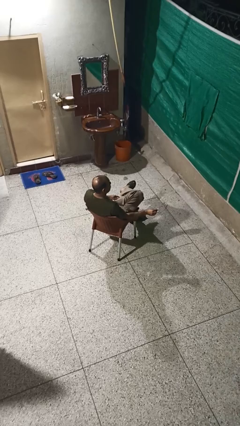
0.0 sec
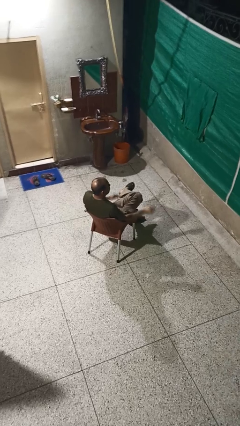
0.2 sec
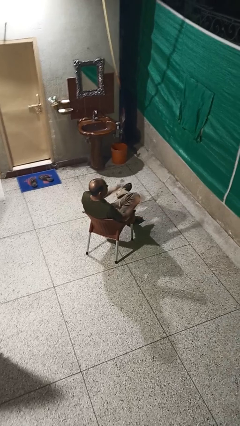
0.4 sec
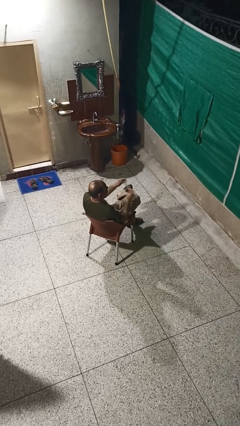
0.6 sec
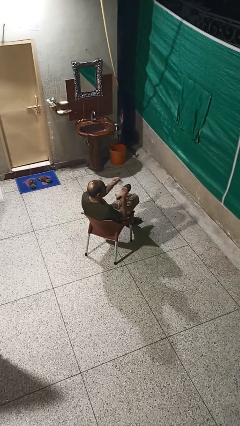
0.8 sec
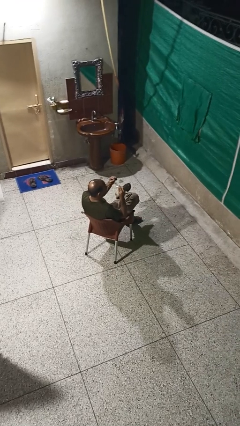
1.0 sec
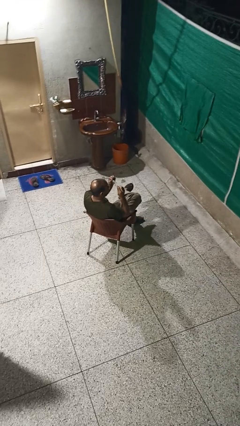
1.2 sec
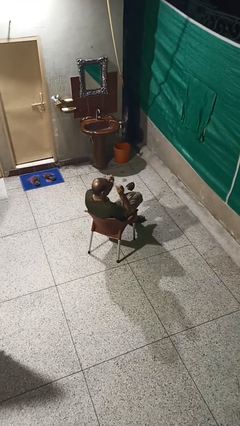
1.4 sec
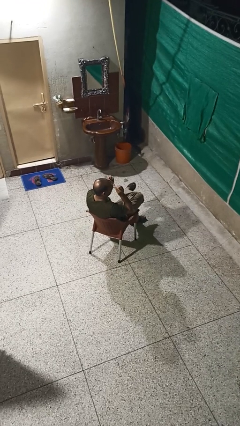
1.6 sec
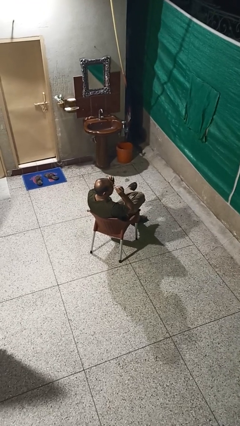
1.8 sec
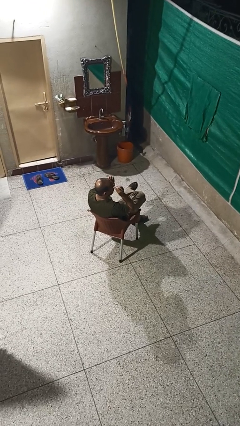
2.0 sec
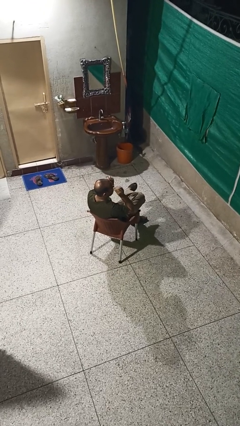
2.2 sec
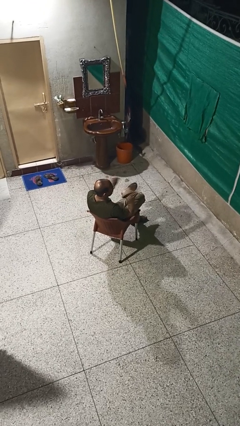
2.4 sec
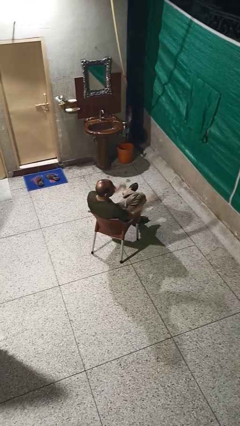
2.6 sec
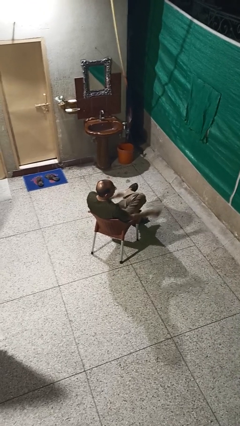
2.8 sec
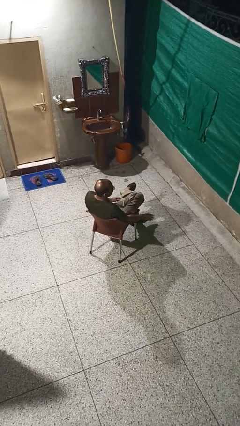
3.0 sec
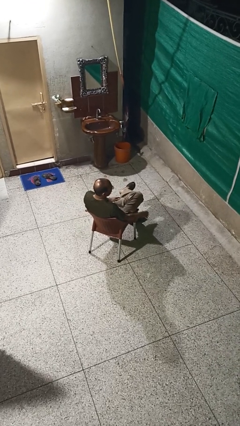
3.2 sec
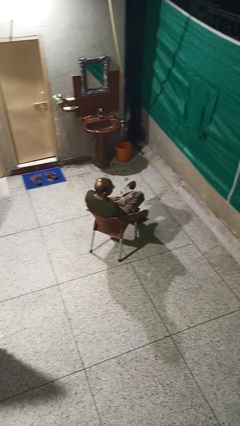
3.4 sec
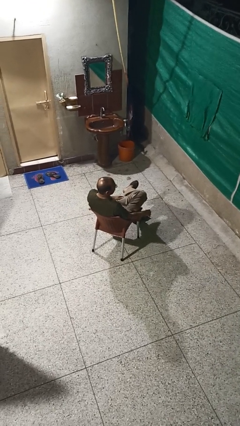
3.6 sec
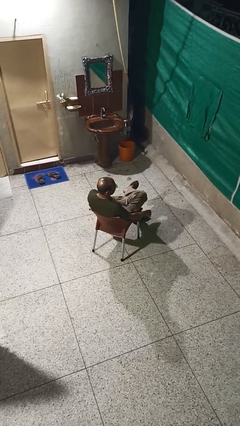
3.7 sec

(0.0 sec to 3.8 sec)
person puts on glasses

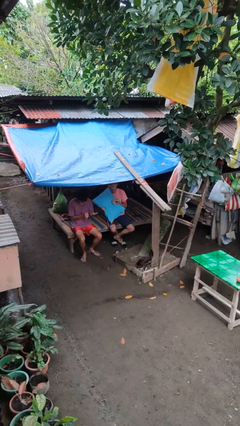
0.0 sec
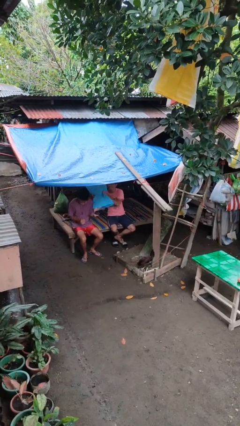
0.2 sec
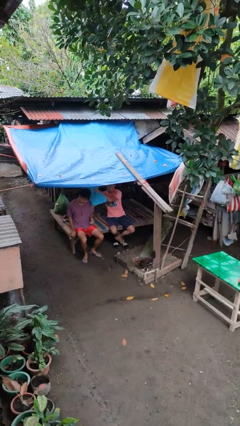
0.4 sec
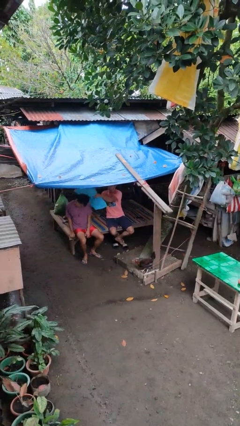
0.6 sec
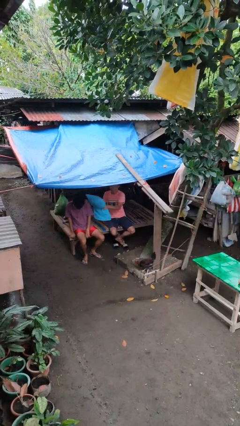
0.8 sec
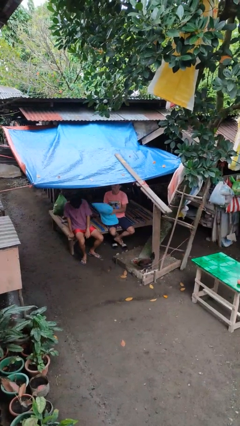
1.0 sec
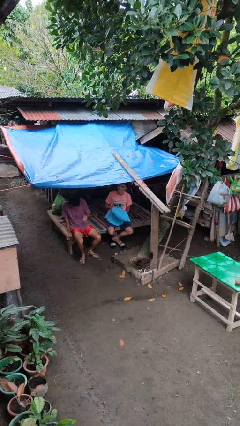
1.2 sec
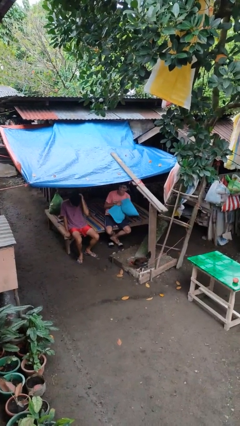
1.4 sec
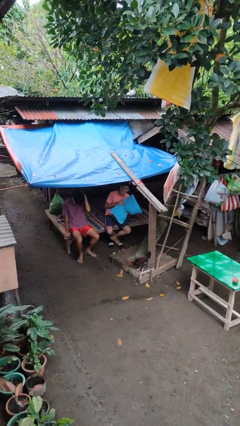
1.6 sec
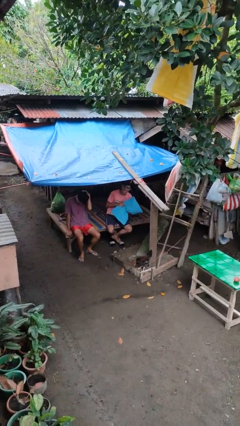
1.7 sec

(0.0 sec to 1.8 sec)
person hits person with pillow

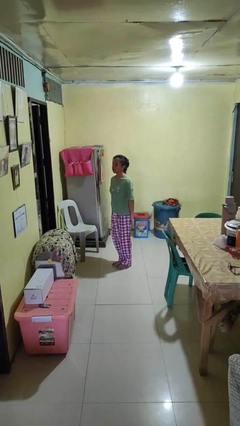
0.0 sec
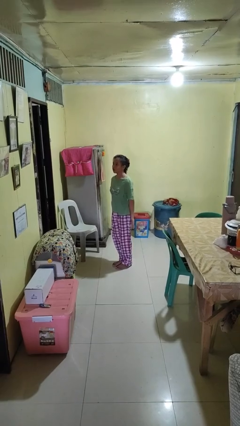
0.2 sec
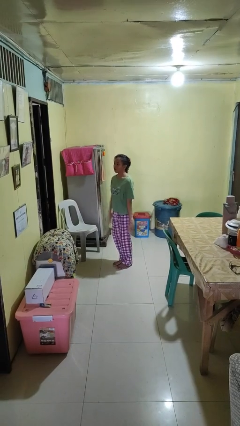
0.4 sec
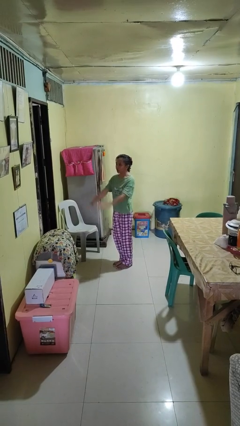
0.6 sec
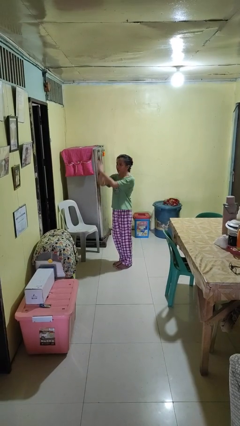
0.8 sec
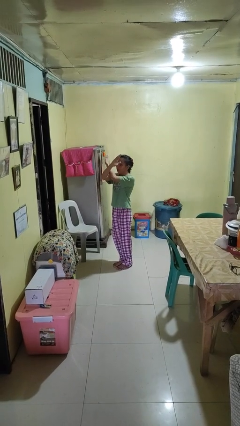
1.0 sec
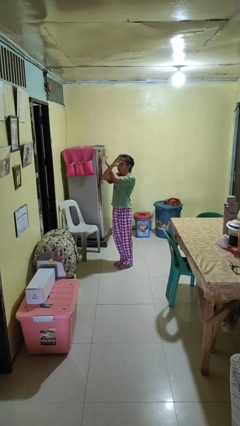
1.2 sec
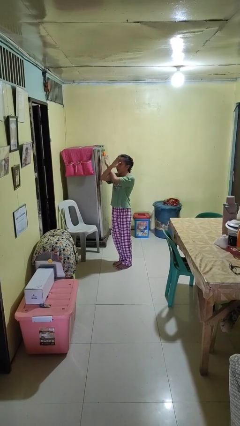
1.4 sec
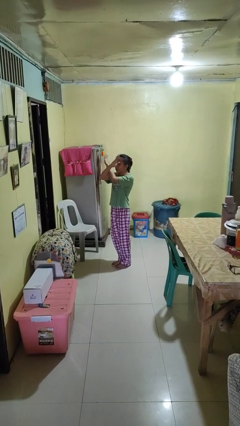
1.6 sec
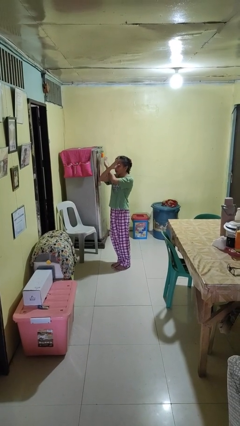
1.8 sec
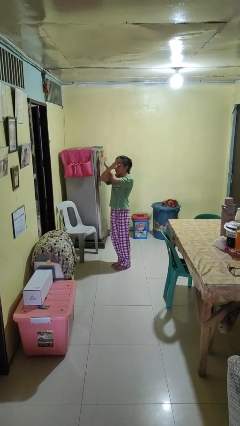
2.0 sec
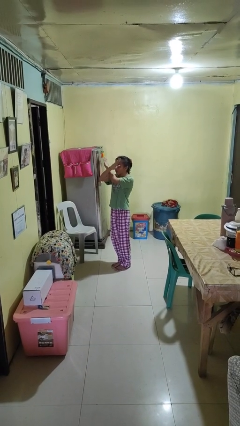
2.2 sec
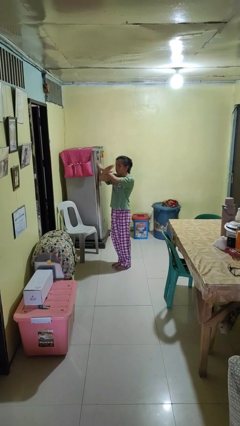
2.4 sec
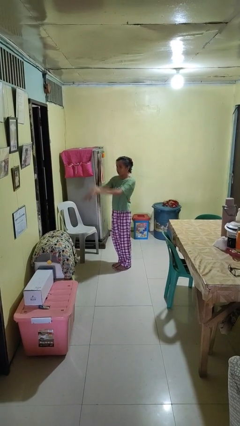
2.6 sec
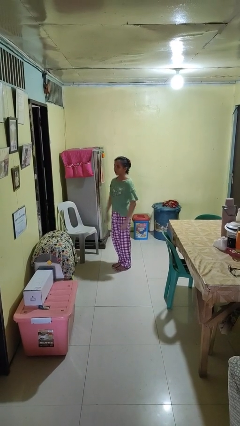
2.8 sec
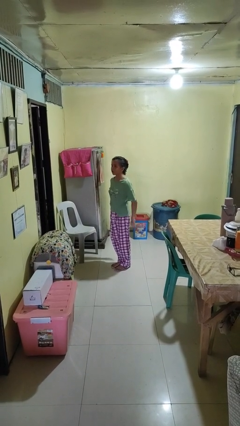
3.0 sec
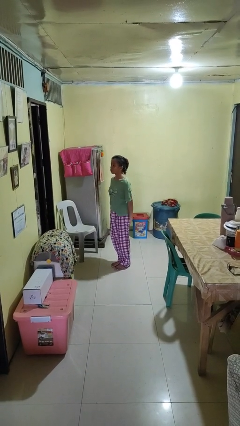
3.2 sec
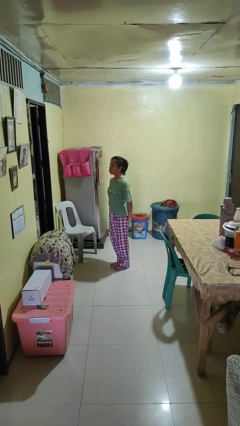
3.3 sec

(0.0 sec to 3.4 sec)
person gestures arms x

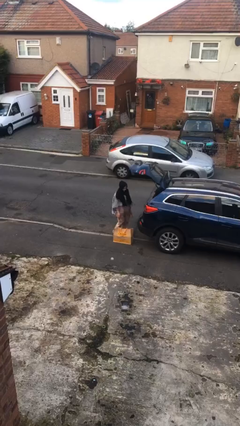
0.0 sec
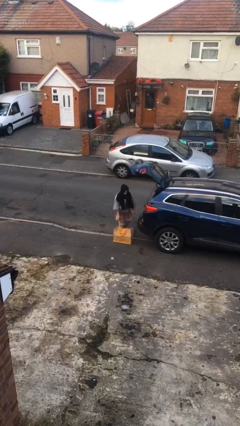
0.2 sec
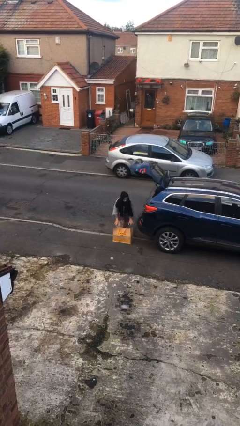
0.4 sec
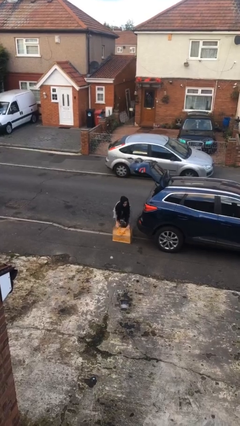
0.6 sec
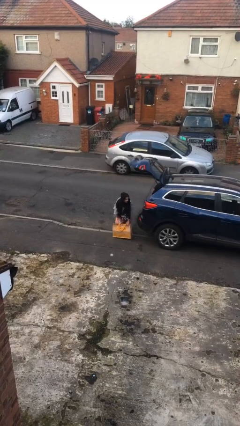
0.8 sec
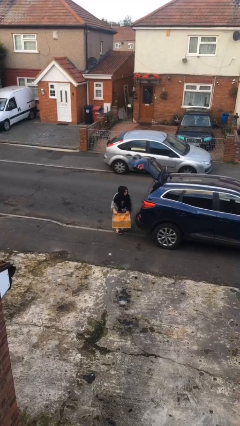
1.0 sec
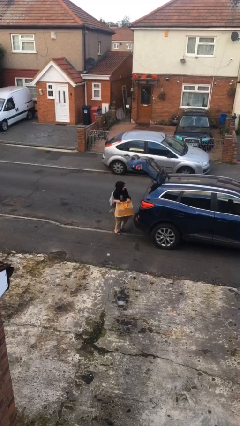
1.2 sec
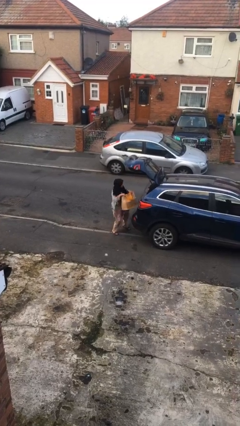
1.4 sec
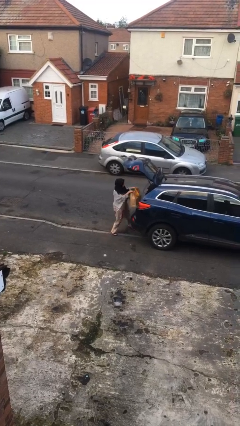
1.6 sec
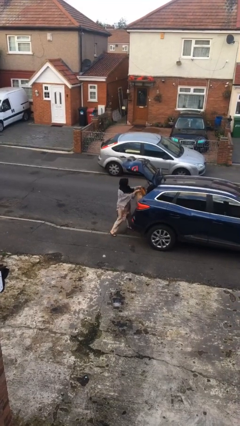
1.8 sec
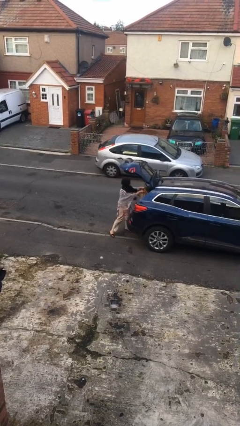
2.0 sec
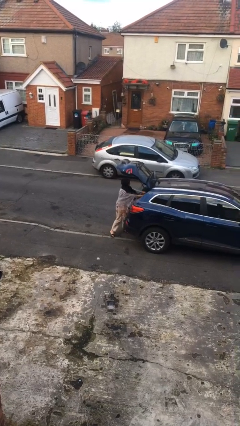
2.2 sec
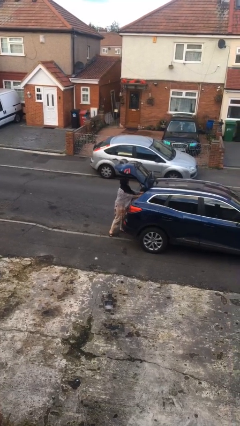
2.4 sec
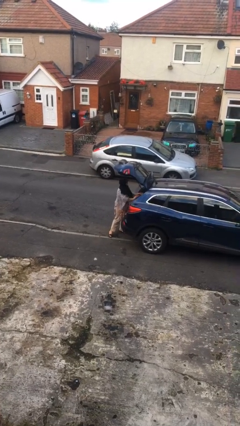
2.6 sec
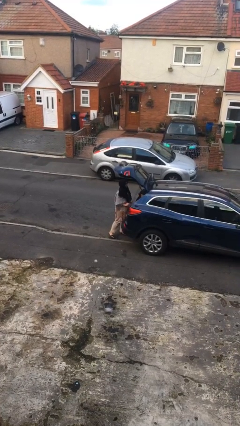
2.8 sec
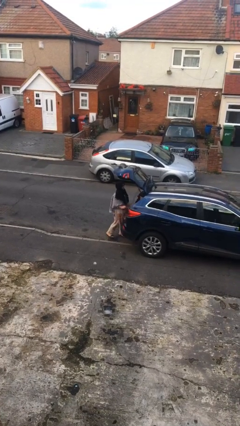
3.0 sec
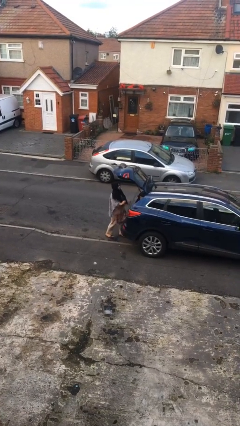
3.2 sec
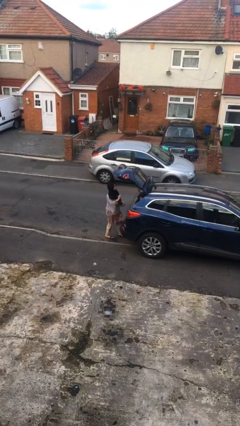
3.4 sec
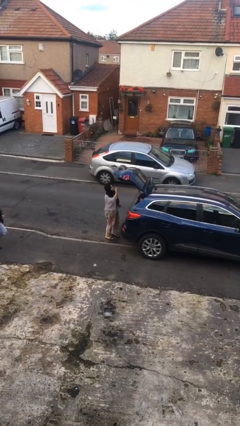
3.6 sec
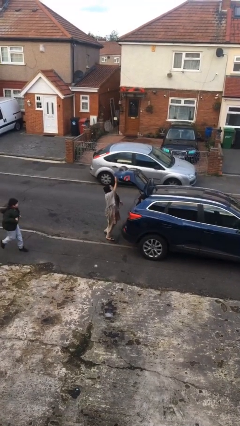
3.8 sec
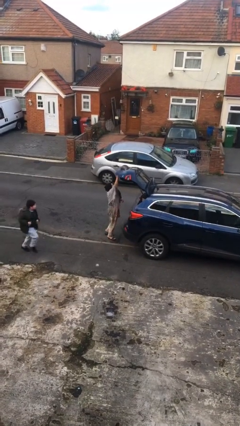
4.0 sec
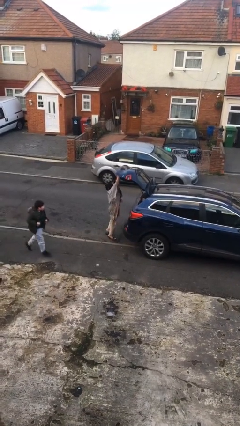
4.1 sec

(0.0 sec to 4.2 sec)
person loads car

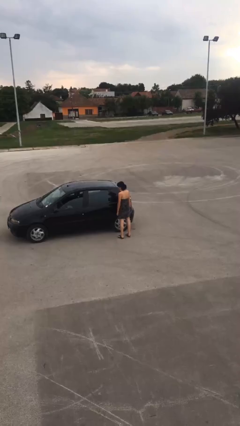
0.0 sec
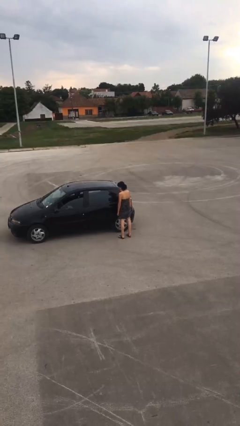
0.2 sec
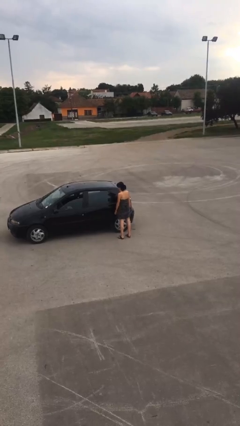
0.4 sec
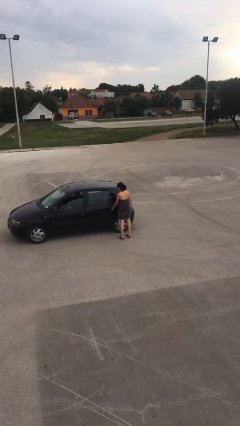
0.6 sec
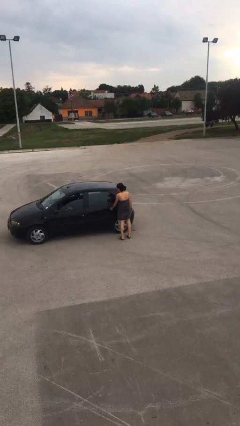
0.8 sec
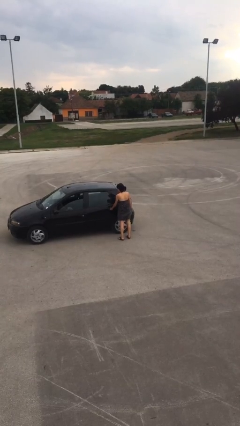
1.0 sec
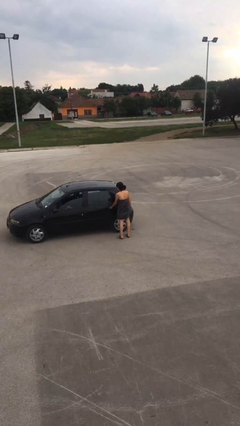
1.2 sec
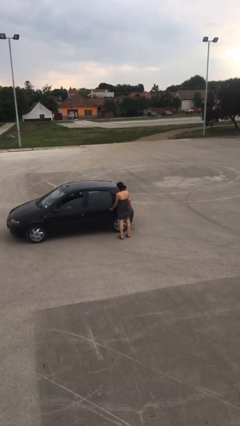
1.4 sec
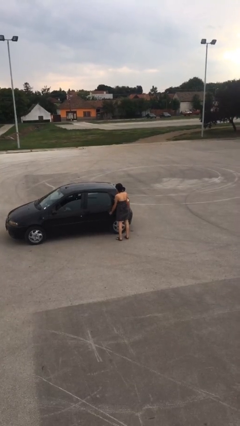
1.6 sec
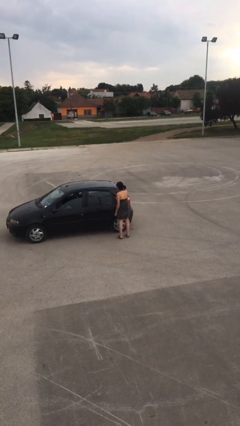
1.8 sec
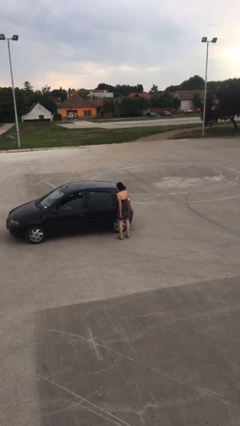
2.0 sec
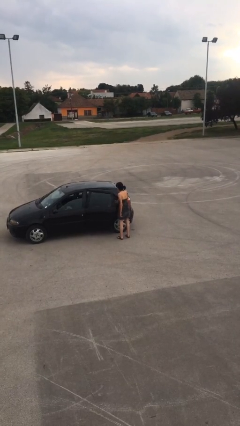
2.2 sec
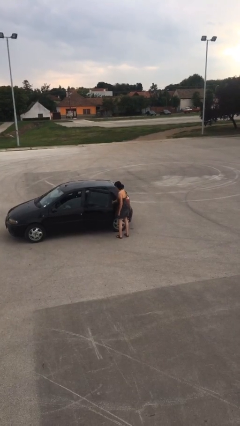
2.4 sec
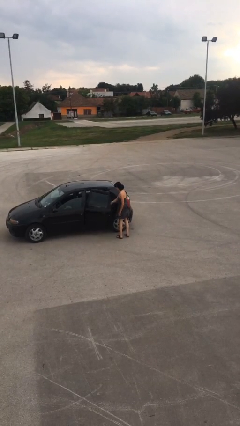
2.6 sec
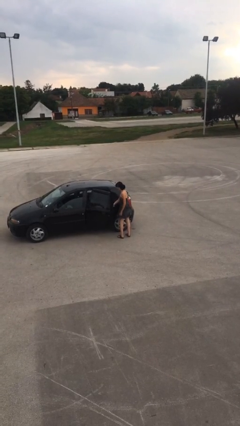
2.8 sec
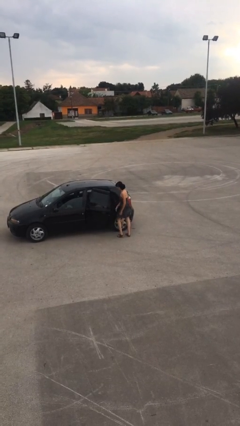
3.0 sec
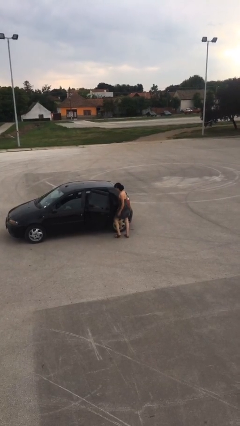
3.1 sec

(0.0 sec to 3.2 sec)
person opens car door

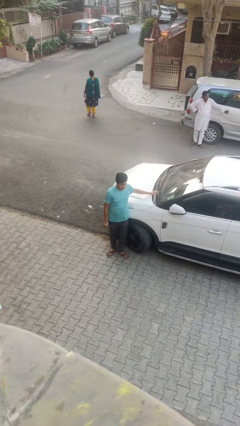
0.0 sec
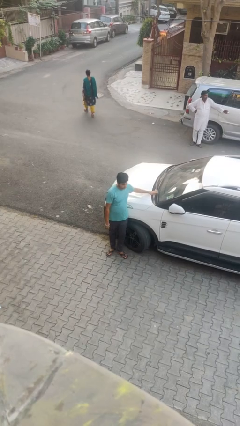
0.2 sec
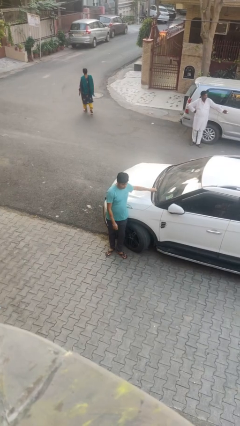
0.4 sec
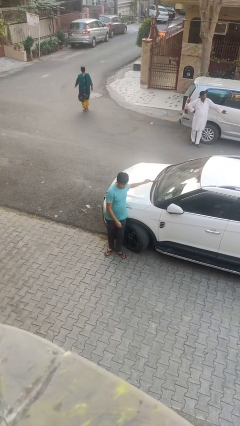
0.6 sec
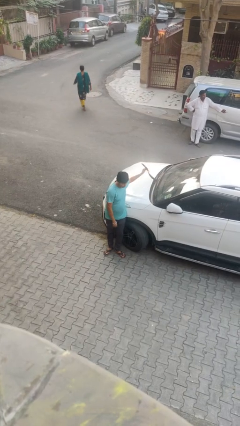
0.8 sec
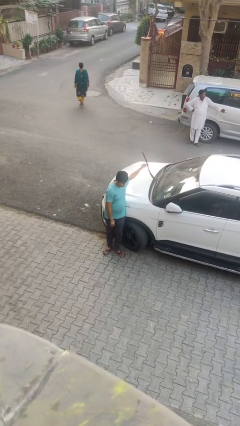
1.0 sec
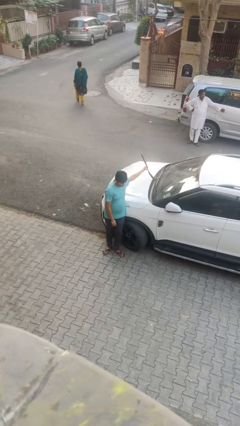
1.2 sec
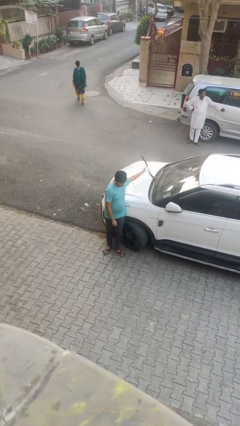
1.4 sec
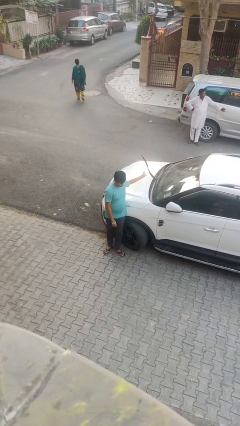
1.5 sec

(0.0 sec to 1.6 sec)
person flips up car wipers
